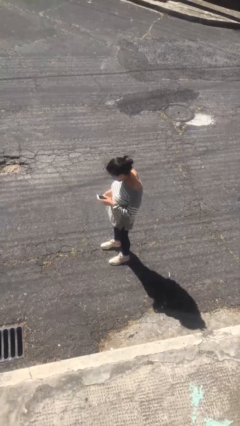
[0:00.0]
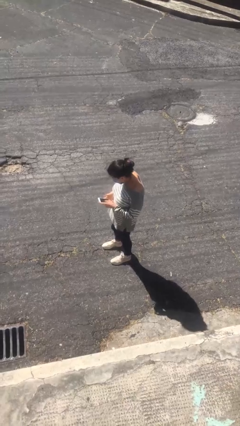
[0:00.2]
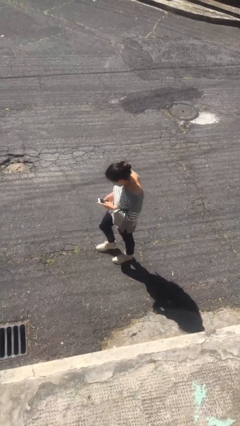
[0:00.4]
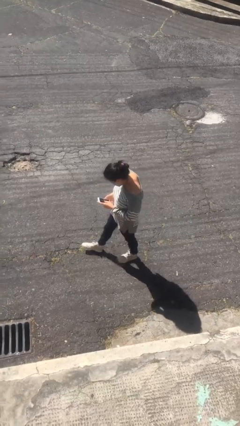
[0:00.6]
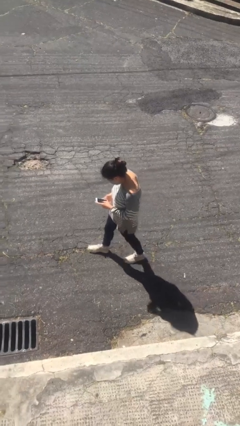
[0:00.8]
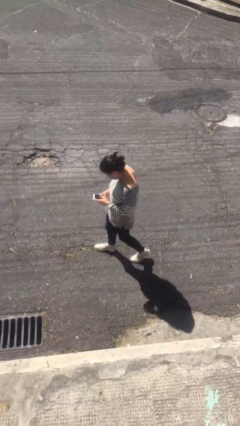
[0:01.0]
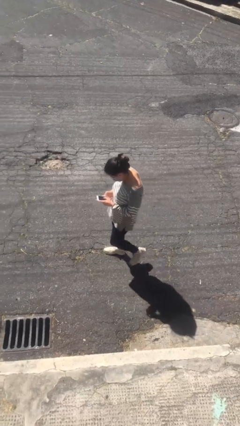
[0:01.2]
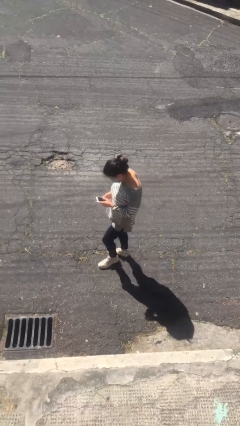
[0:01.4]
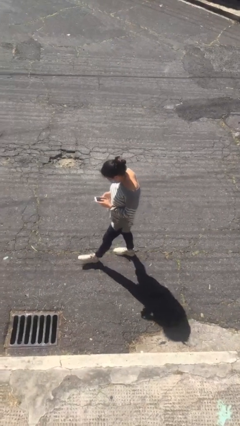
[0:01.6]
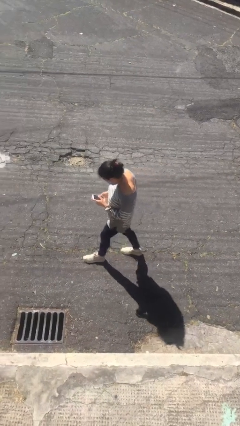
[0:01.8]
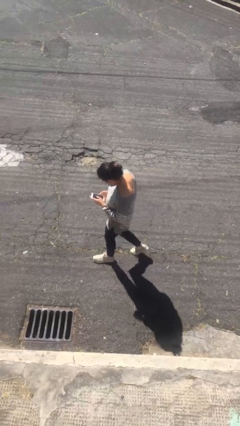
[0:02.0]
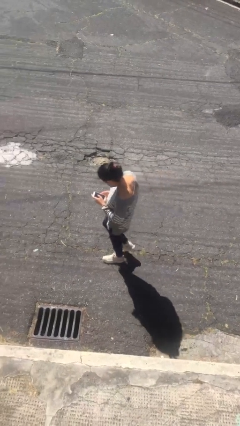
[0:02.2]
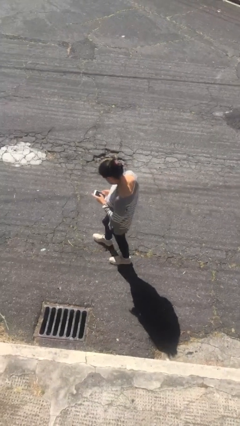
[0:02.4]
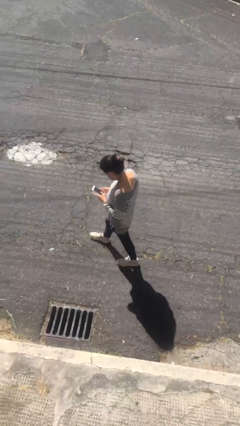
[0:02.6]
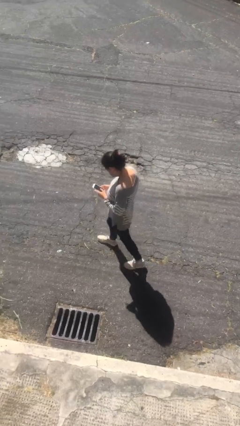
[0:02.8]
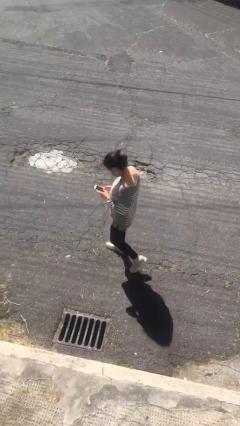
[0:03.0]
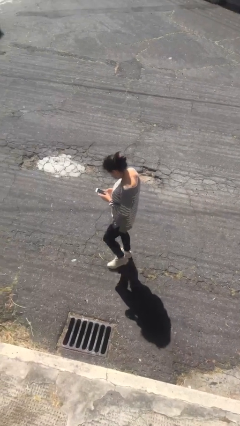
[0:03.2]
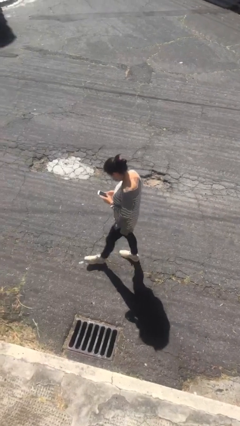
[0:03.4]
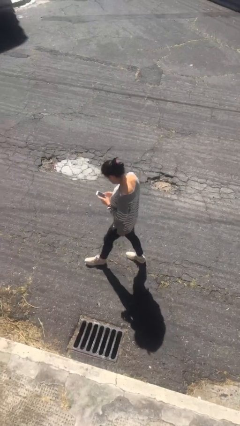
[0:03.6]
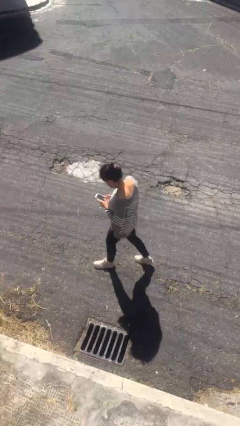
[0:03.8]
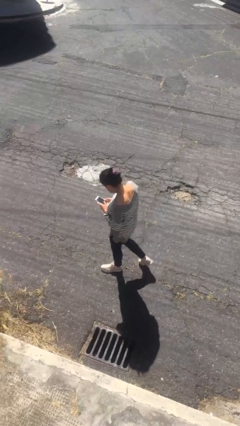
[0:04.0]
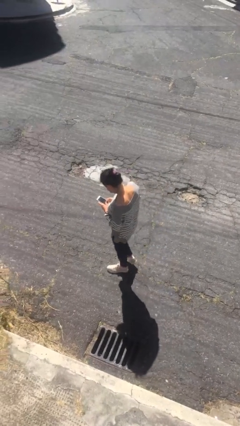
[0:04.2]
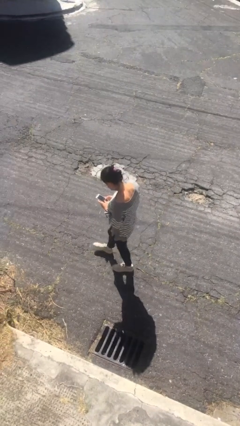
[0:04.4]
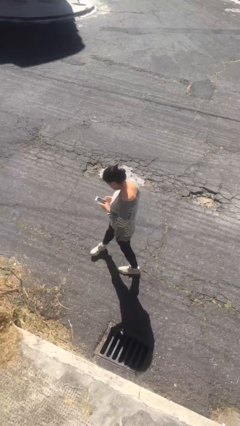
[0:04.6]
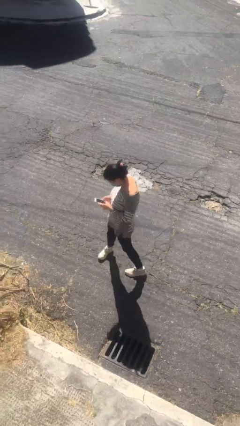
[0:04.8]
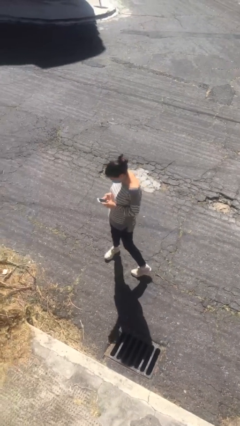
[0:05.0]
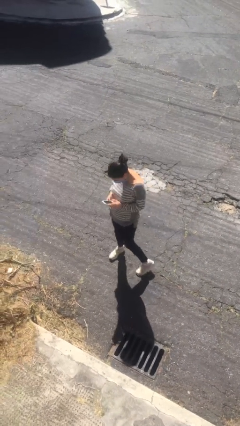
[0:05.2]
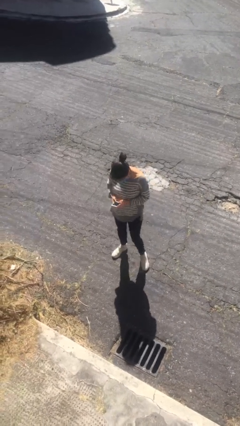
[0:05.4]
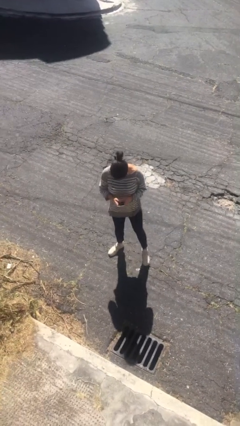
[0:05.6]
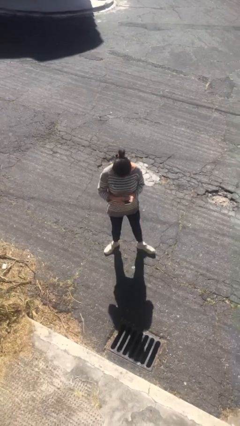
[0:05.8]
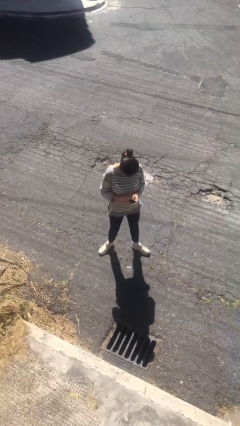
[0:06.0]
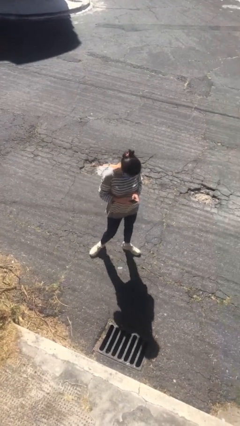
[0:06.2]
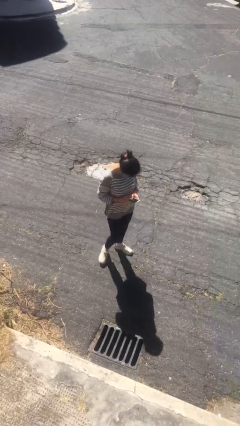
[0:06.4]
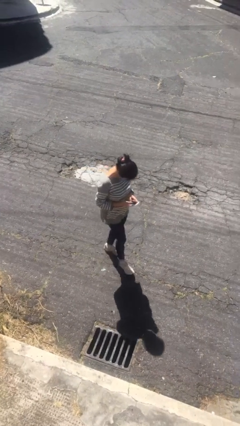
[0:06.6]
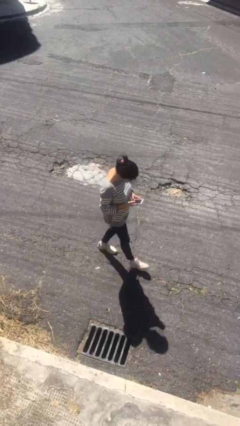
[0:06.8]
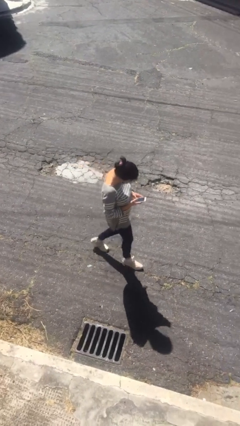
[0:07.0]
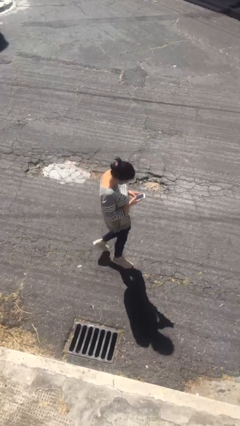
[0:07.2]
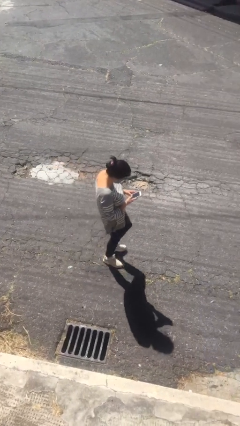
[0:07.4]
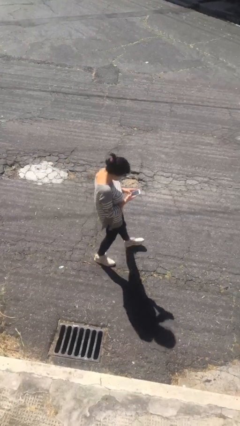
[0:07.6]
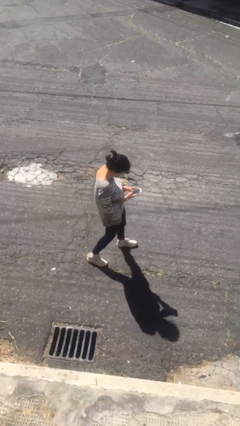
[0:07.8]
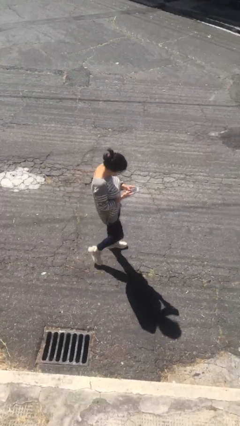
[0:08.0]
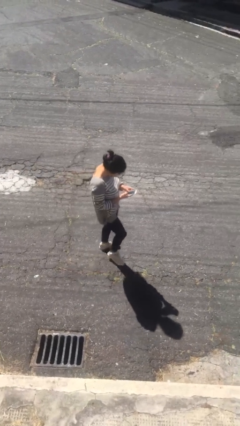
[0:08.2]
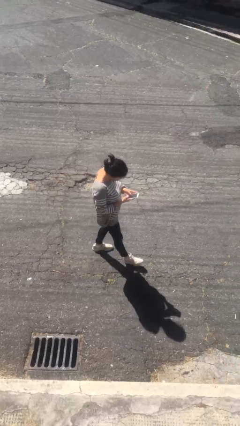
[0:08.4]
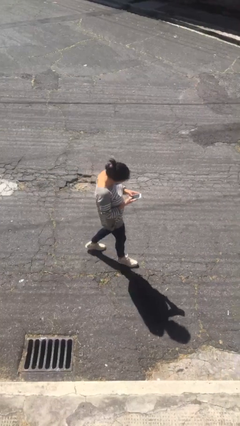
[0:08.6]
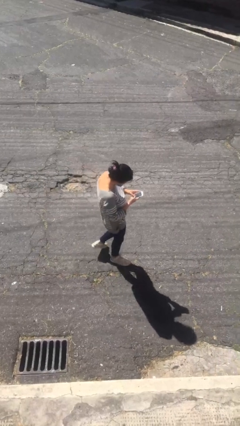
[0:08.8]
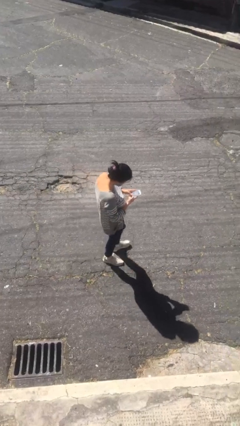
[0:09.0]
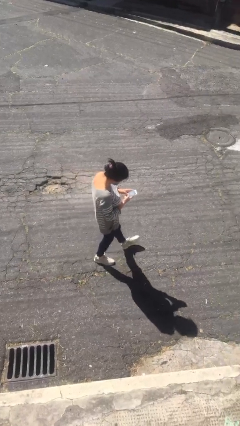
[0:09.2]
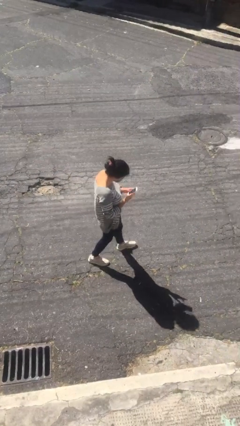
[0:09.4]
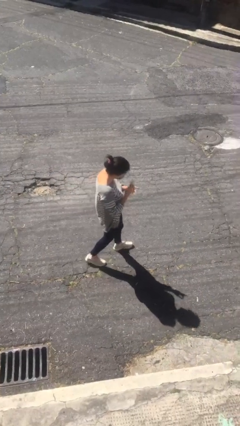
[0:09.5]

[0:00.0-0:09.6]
person texts on phone

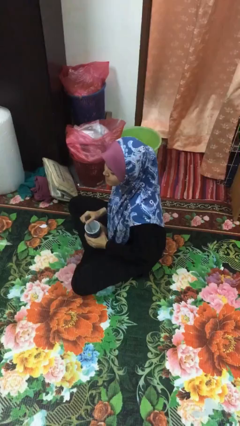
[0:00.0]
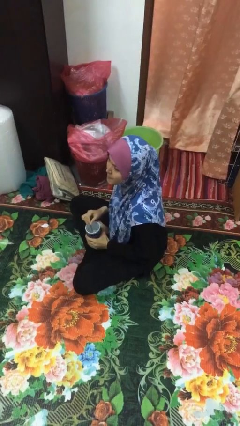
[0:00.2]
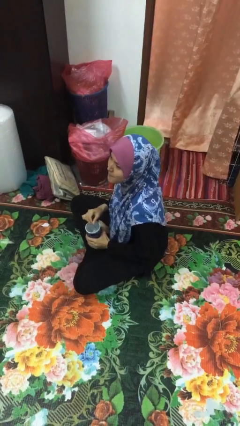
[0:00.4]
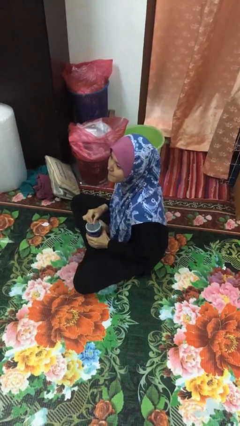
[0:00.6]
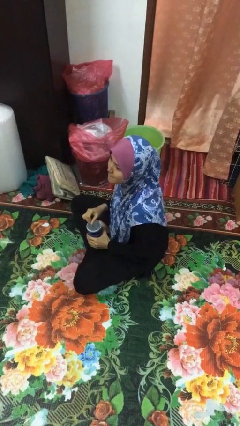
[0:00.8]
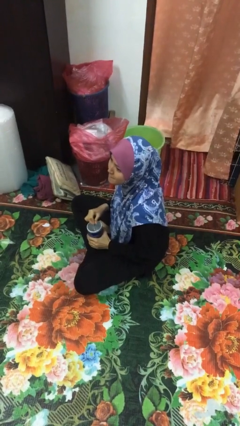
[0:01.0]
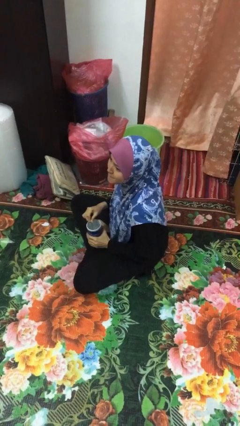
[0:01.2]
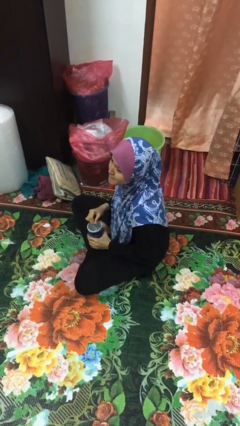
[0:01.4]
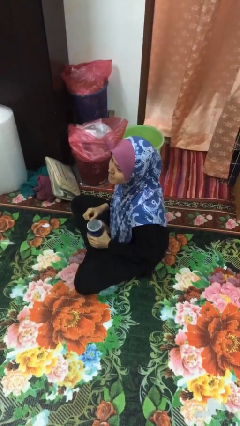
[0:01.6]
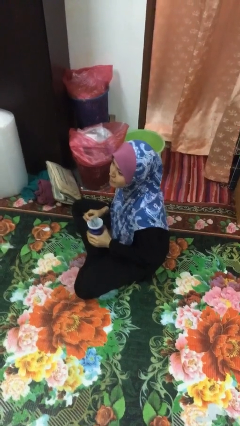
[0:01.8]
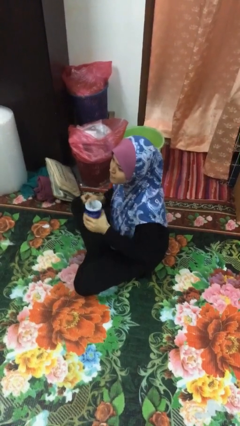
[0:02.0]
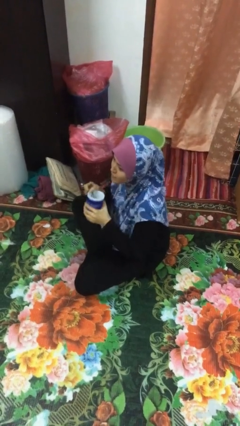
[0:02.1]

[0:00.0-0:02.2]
person stirs mug

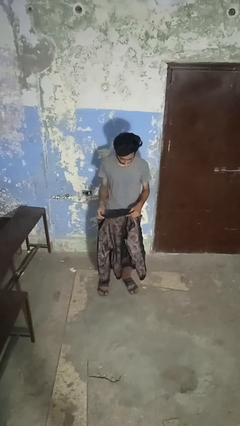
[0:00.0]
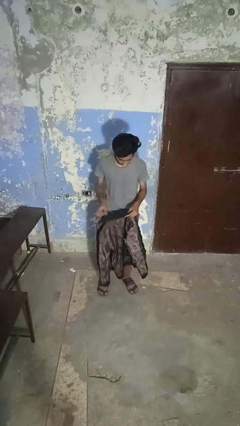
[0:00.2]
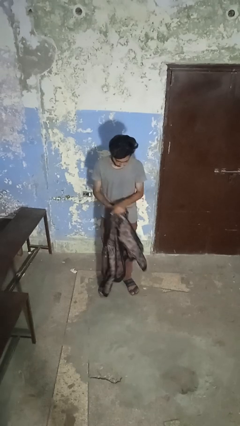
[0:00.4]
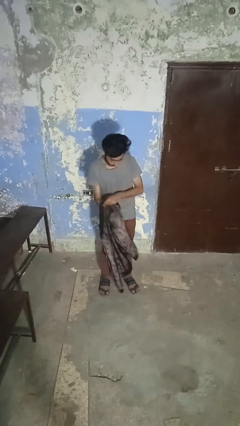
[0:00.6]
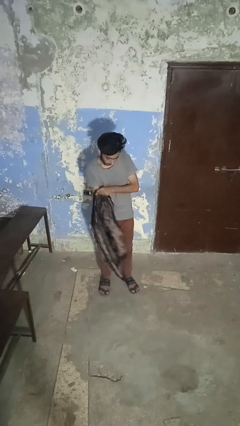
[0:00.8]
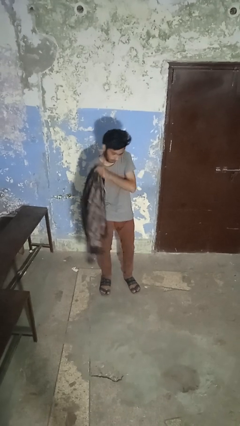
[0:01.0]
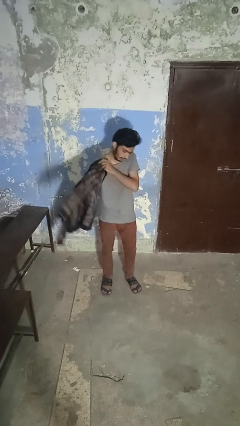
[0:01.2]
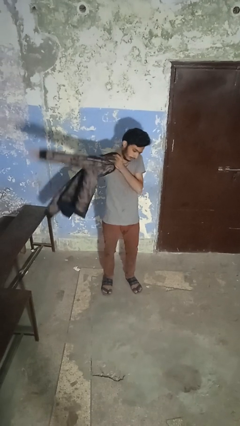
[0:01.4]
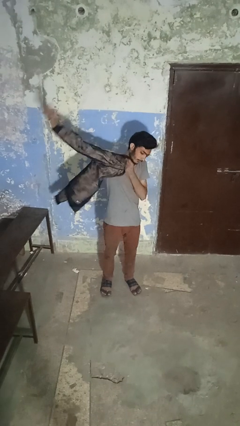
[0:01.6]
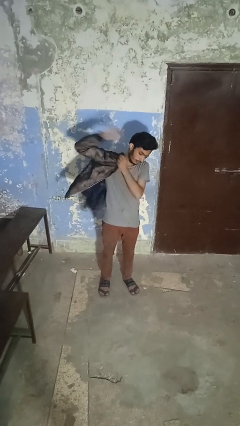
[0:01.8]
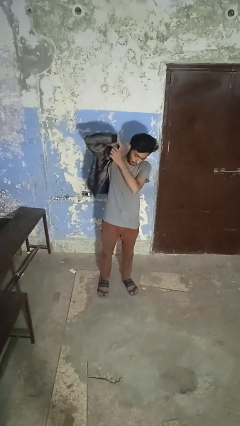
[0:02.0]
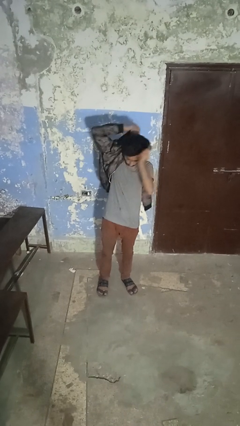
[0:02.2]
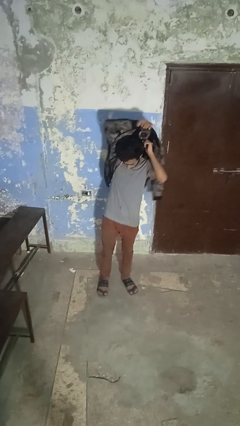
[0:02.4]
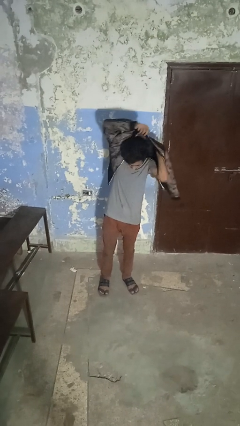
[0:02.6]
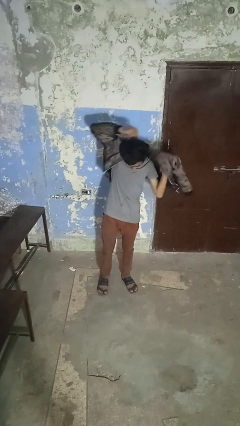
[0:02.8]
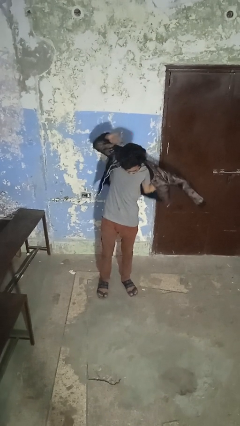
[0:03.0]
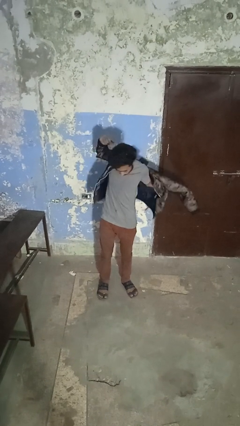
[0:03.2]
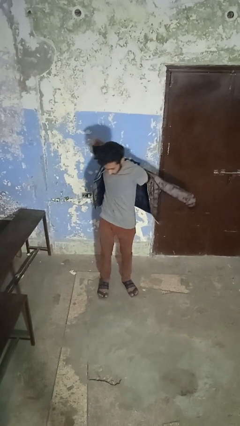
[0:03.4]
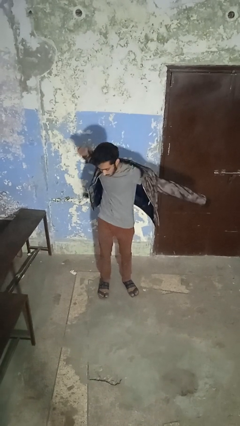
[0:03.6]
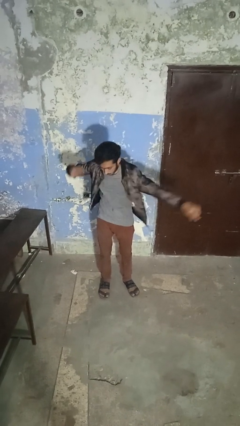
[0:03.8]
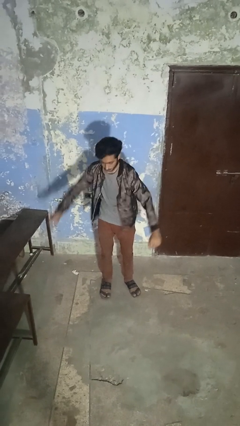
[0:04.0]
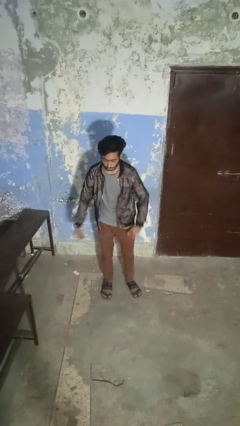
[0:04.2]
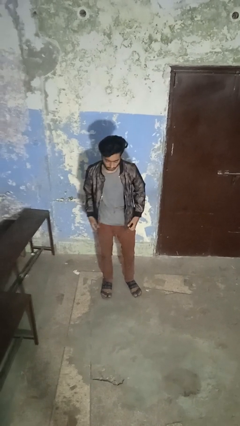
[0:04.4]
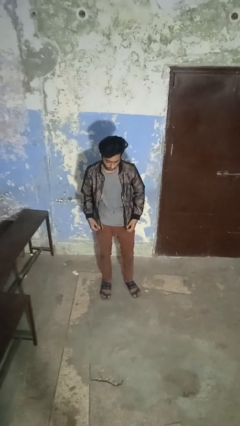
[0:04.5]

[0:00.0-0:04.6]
person puts on jacket

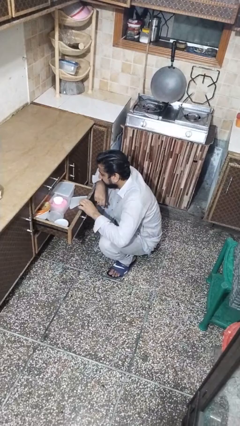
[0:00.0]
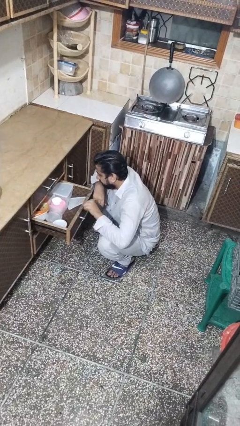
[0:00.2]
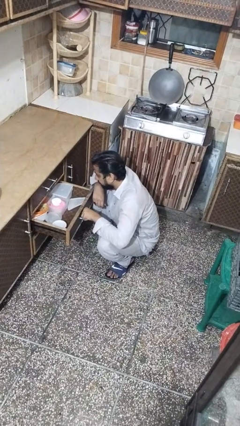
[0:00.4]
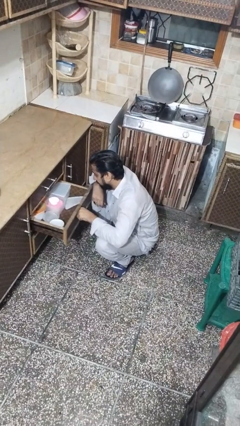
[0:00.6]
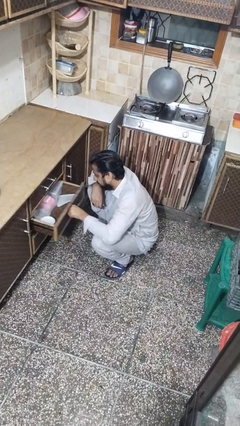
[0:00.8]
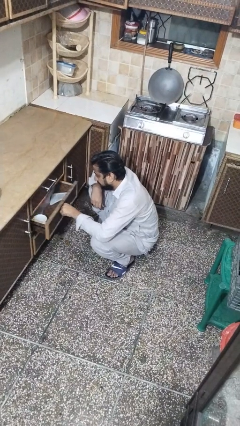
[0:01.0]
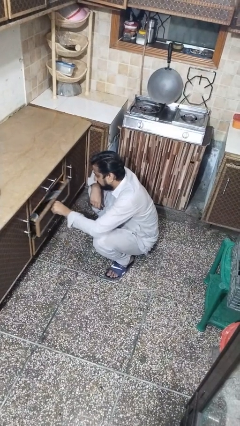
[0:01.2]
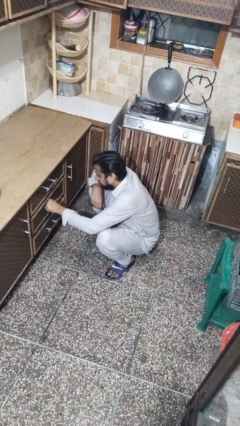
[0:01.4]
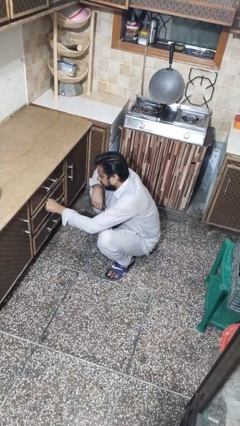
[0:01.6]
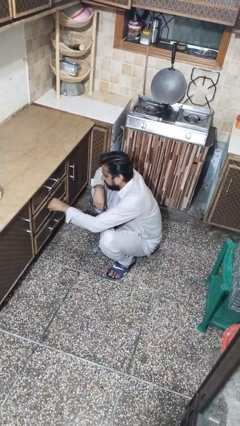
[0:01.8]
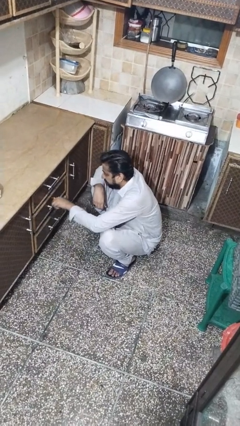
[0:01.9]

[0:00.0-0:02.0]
person closes kitchen drawer
